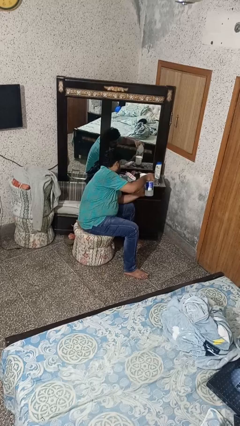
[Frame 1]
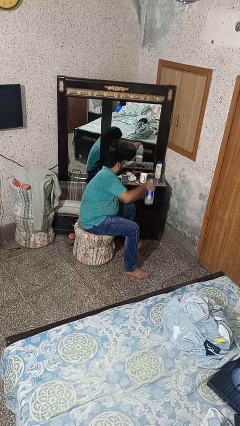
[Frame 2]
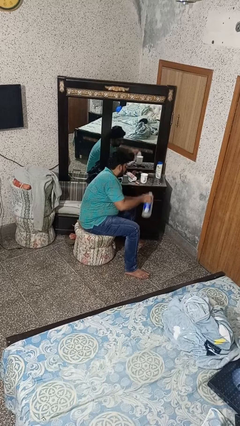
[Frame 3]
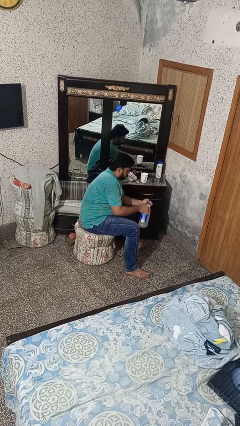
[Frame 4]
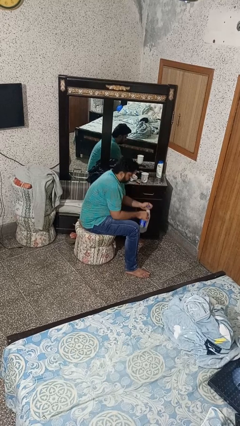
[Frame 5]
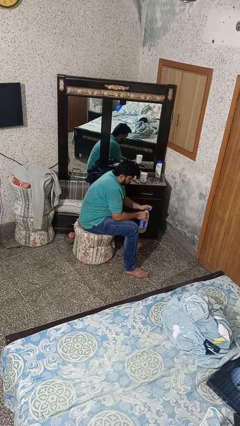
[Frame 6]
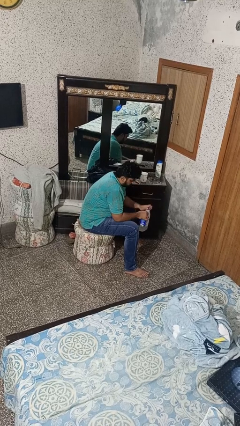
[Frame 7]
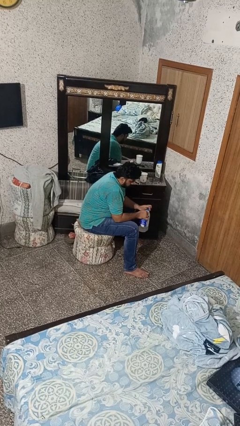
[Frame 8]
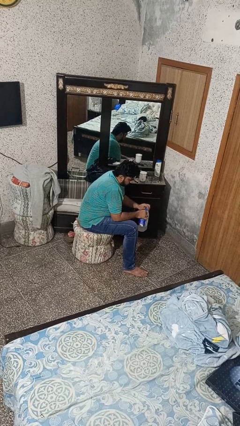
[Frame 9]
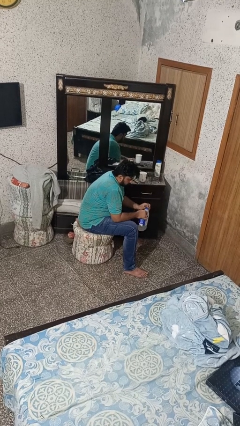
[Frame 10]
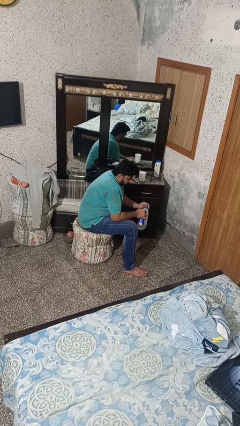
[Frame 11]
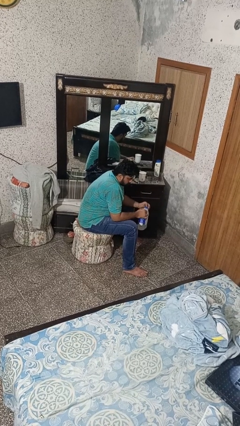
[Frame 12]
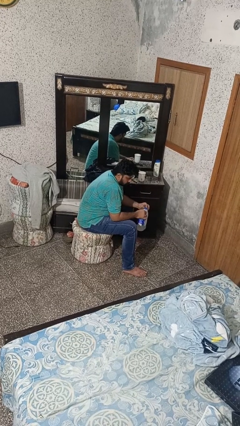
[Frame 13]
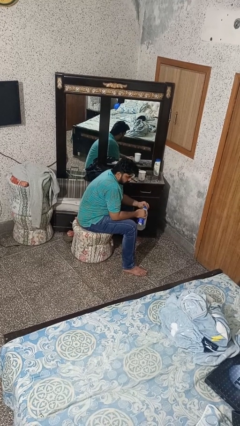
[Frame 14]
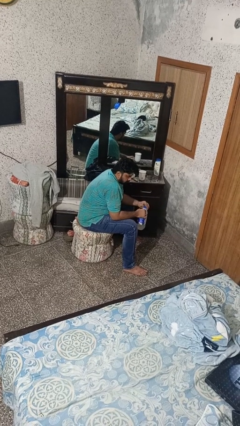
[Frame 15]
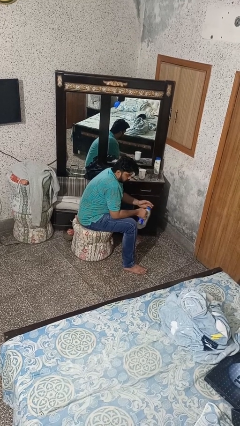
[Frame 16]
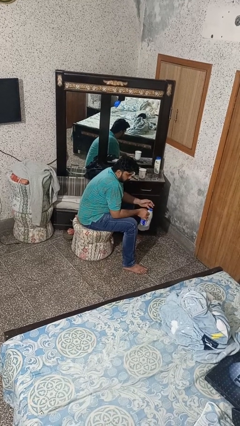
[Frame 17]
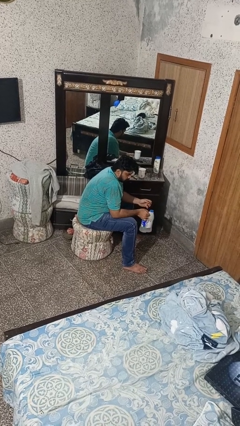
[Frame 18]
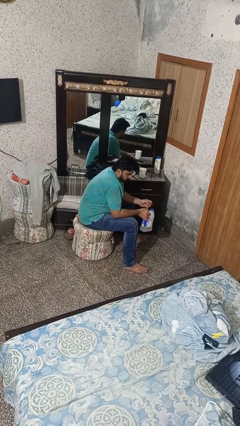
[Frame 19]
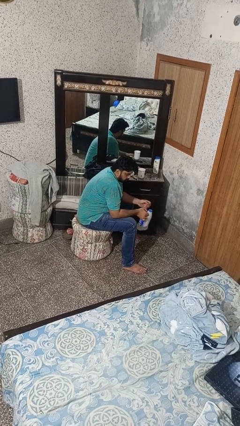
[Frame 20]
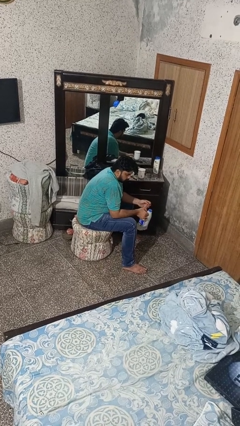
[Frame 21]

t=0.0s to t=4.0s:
person screws lid to bottle

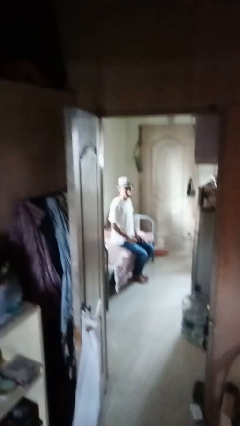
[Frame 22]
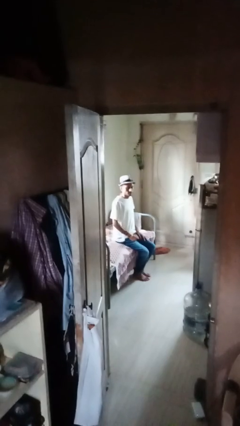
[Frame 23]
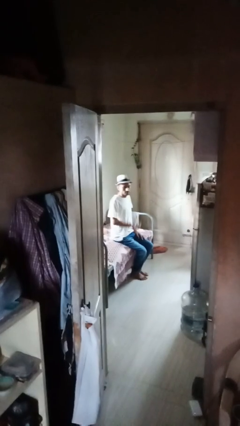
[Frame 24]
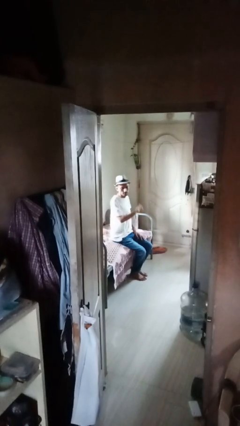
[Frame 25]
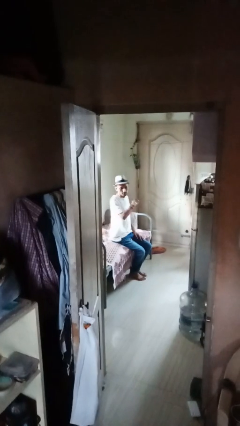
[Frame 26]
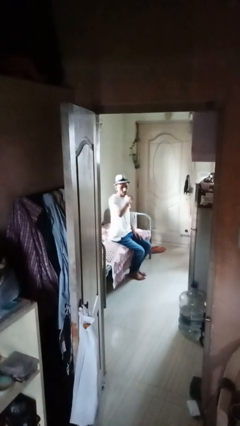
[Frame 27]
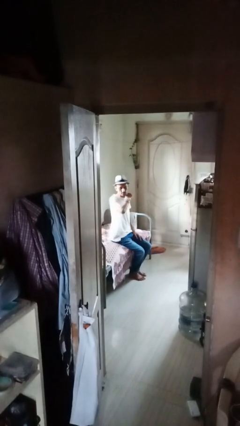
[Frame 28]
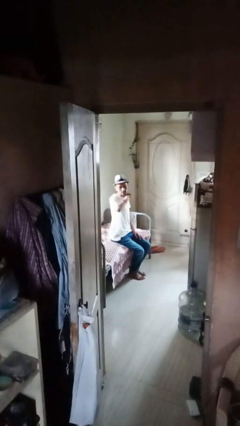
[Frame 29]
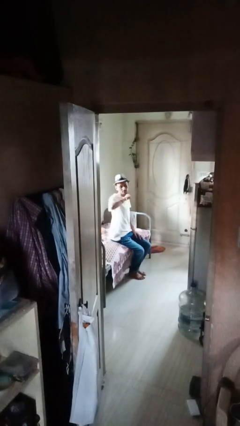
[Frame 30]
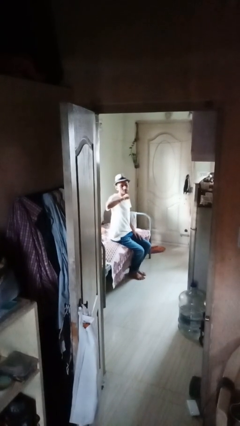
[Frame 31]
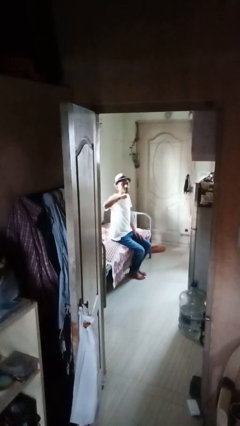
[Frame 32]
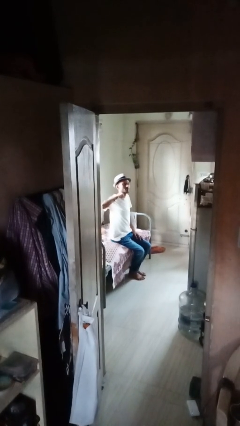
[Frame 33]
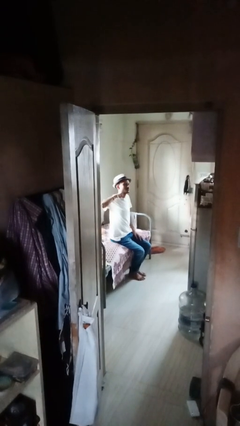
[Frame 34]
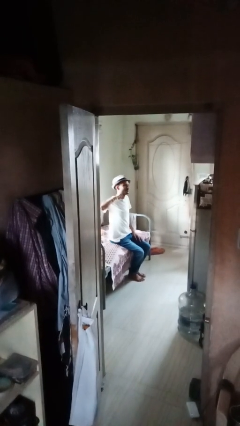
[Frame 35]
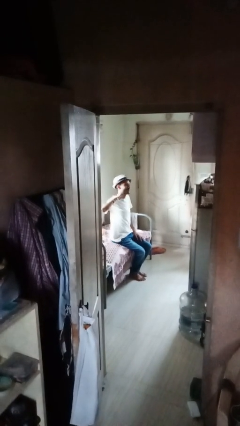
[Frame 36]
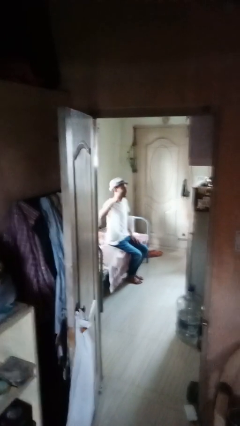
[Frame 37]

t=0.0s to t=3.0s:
person gestures cut

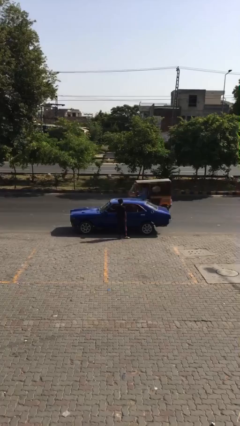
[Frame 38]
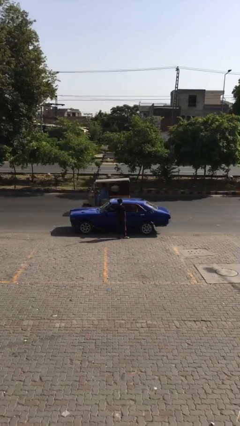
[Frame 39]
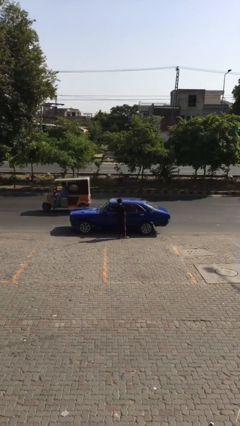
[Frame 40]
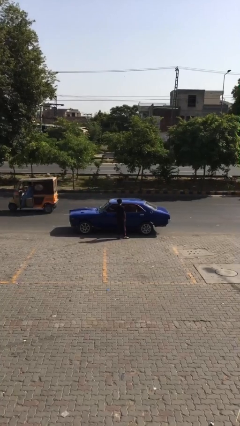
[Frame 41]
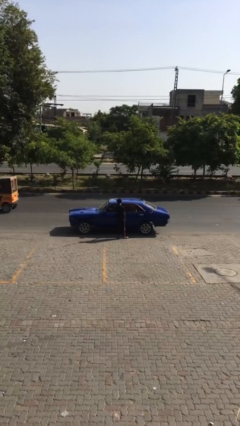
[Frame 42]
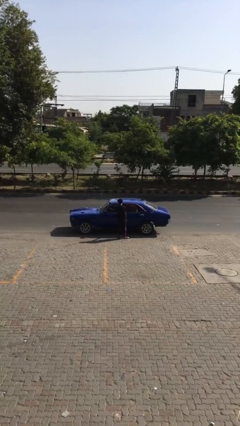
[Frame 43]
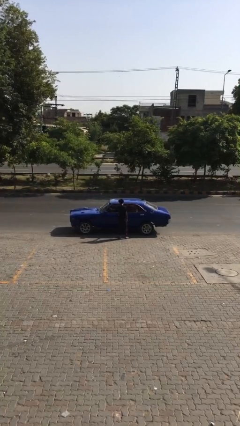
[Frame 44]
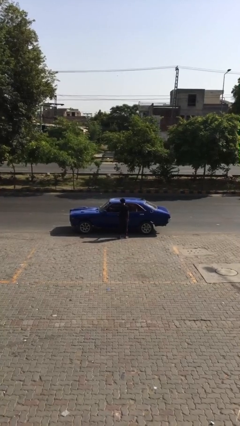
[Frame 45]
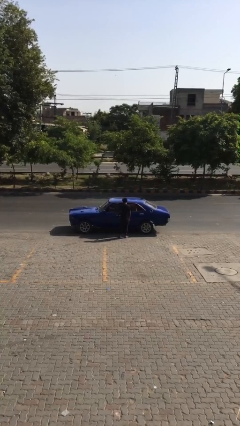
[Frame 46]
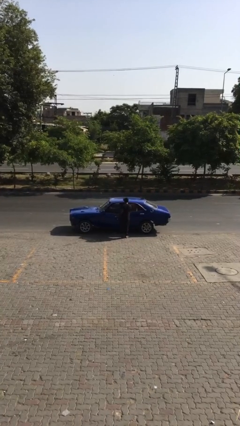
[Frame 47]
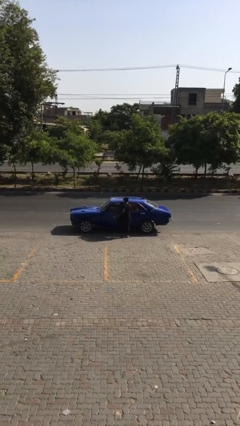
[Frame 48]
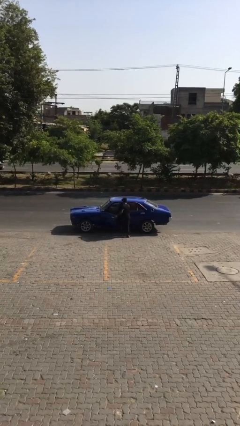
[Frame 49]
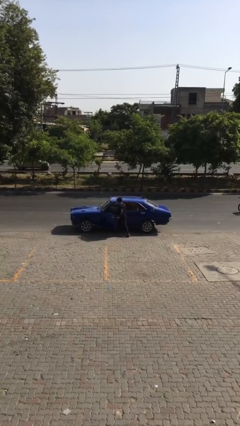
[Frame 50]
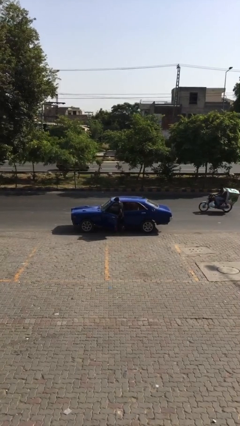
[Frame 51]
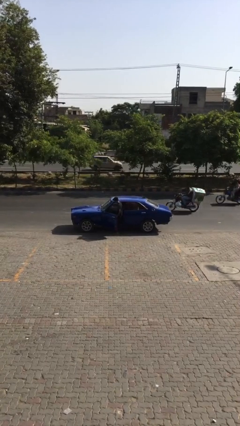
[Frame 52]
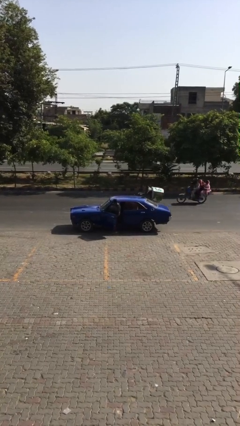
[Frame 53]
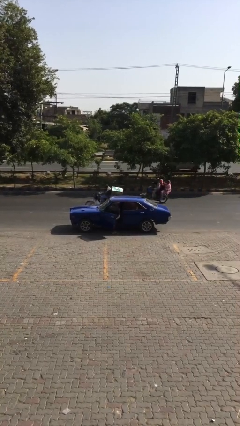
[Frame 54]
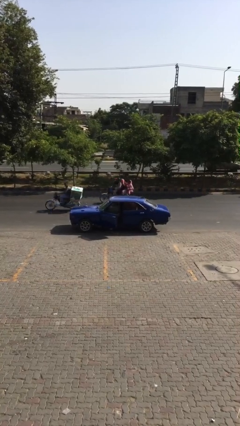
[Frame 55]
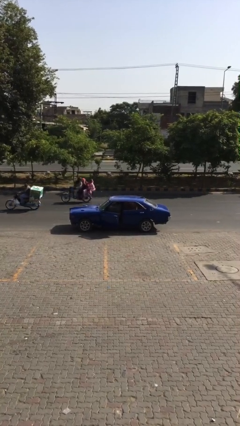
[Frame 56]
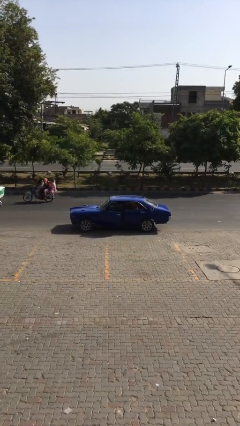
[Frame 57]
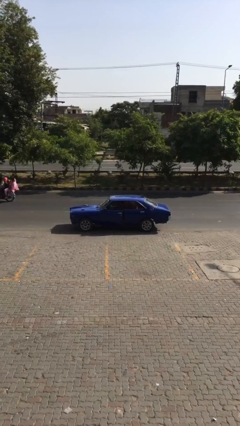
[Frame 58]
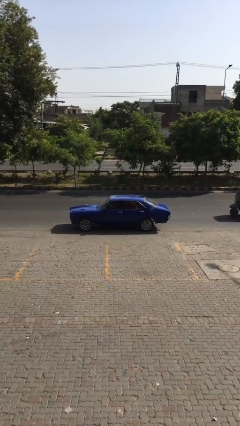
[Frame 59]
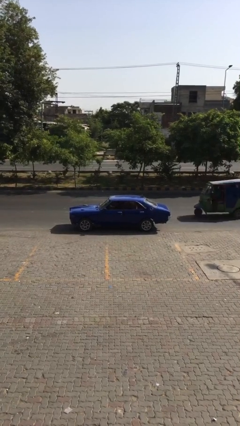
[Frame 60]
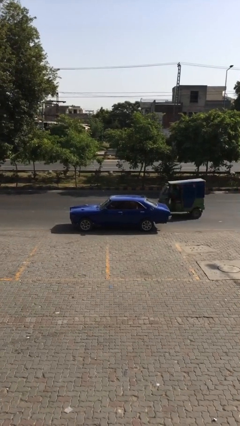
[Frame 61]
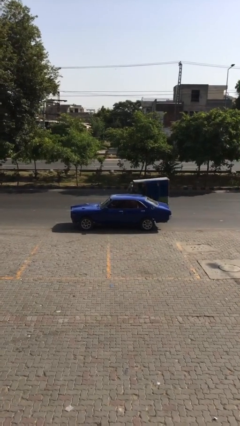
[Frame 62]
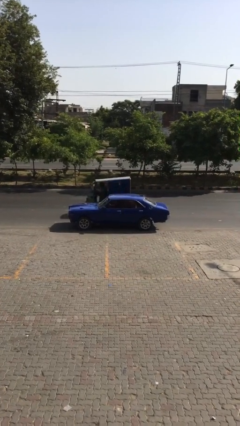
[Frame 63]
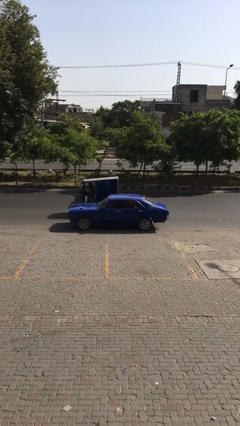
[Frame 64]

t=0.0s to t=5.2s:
car picks up person

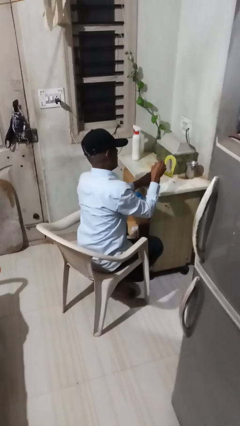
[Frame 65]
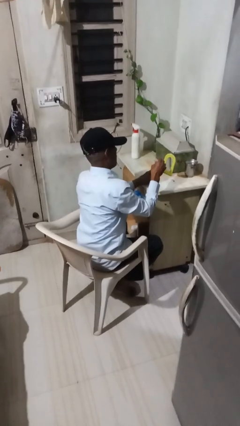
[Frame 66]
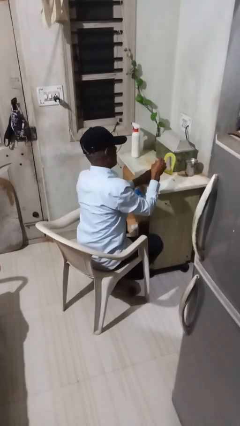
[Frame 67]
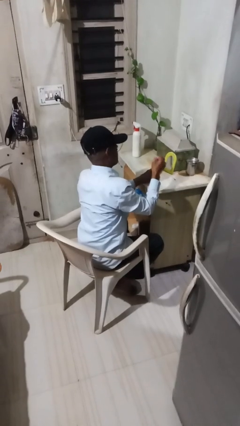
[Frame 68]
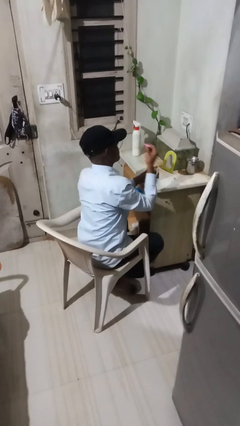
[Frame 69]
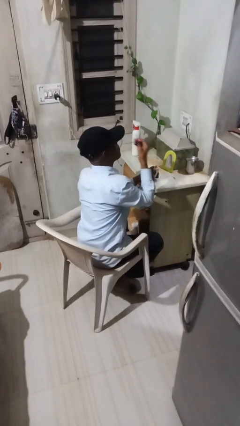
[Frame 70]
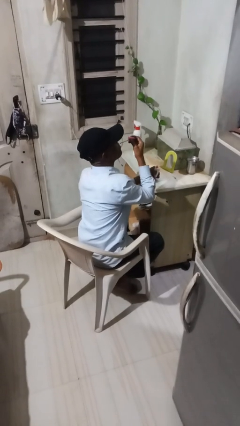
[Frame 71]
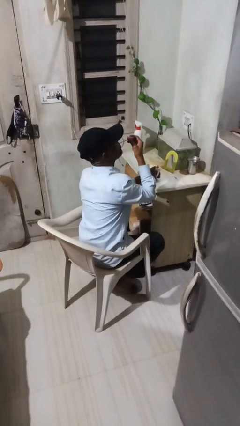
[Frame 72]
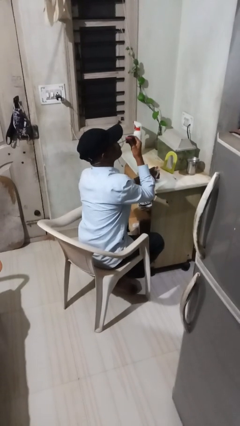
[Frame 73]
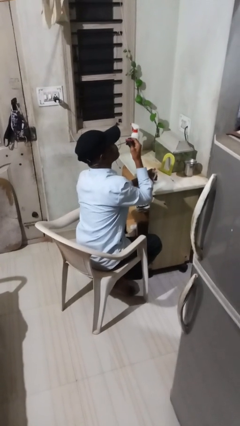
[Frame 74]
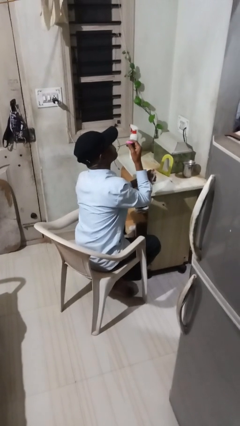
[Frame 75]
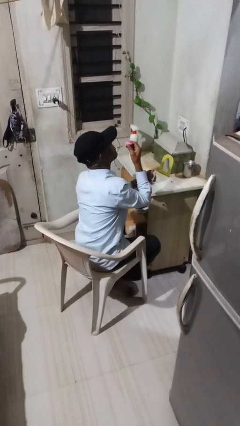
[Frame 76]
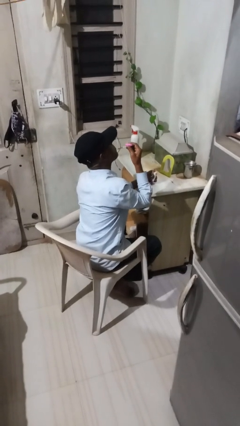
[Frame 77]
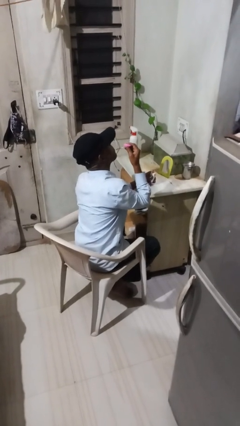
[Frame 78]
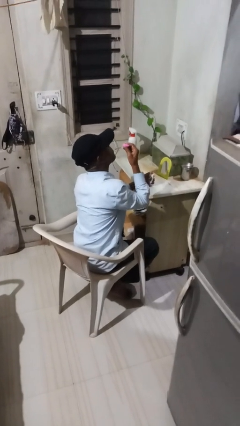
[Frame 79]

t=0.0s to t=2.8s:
person applies lip makeup

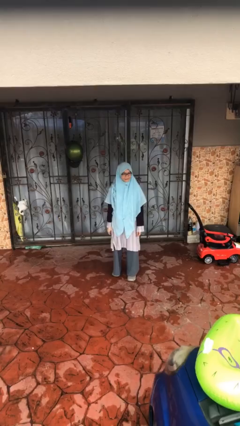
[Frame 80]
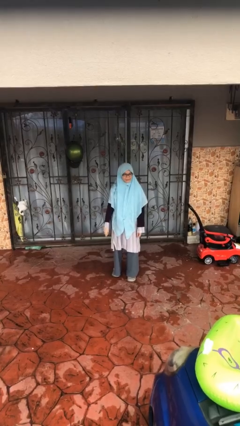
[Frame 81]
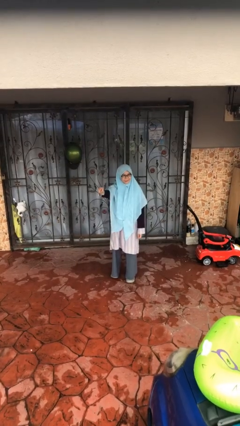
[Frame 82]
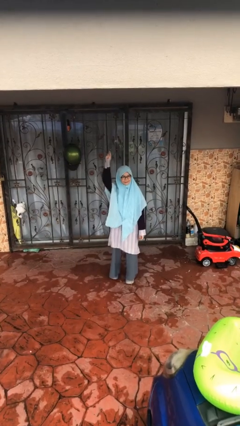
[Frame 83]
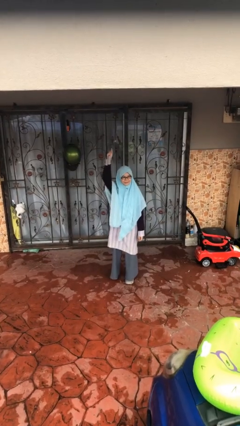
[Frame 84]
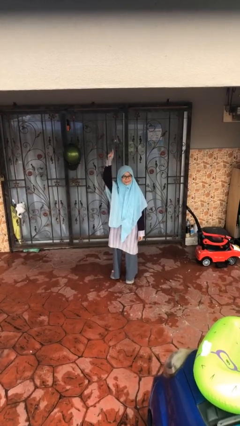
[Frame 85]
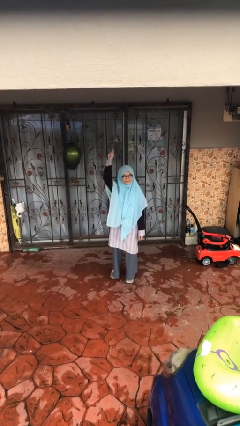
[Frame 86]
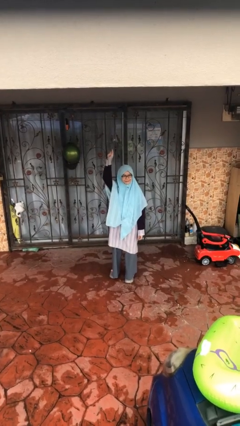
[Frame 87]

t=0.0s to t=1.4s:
person gestures raise hand

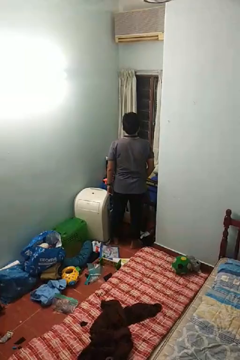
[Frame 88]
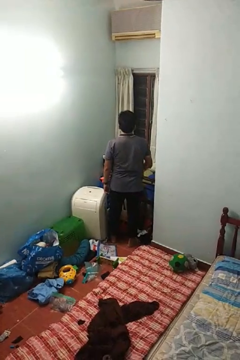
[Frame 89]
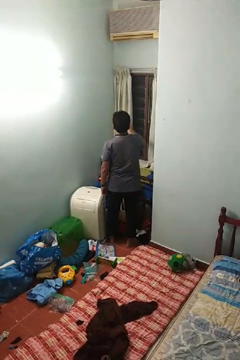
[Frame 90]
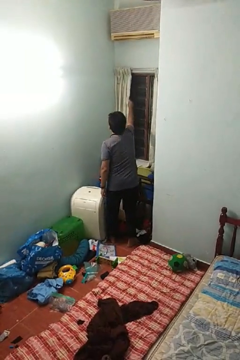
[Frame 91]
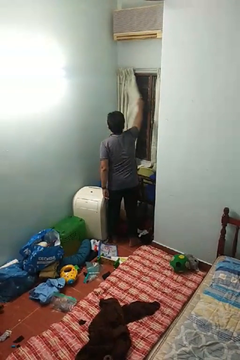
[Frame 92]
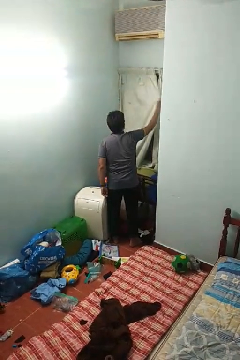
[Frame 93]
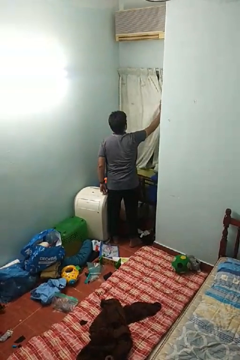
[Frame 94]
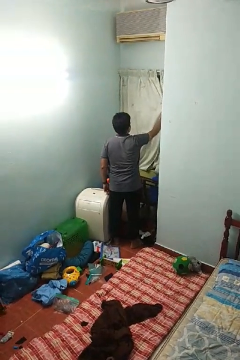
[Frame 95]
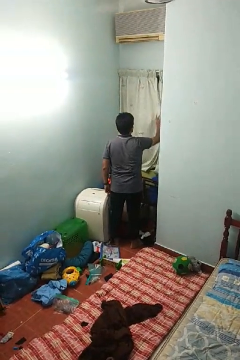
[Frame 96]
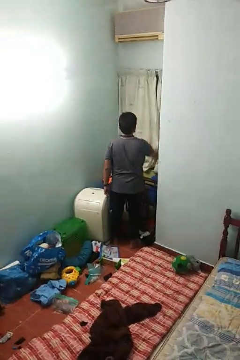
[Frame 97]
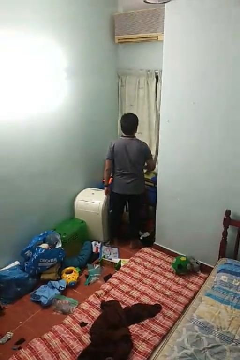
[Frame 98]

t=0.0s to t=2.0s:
person closes curtains
